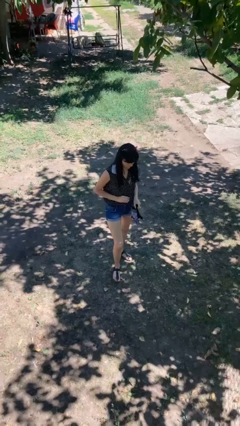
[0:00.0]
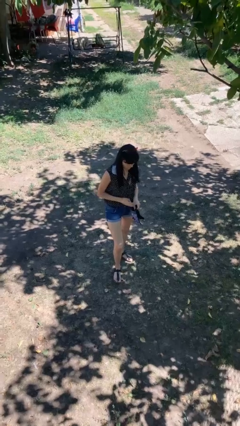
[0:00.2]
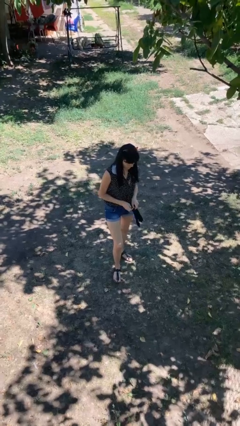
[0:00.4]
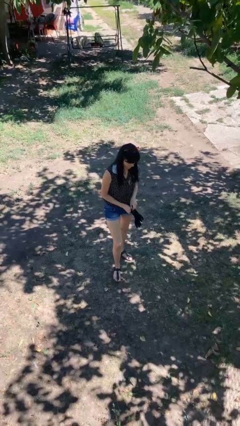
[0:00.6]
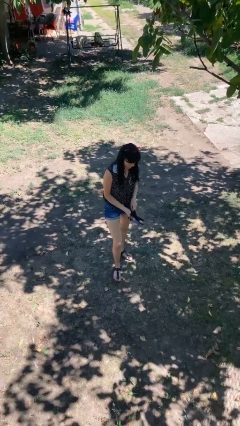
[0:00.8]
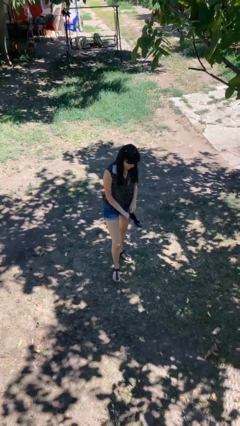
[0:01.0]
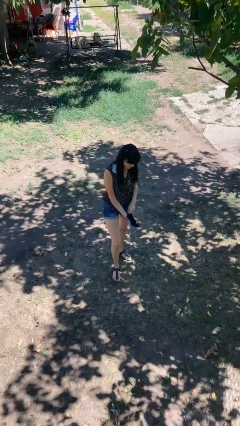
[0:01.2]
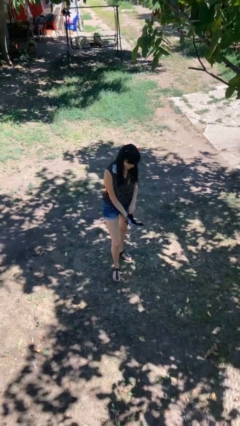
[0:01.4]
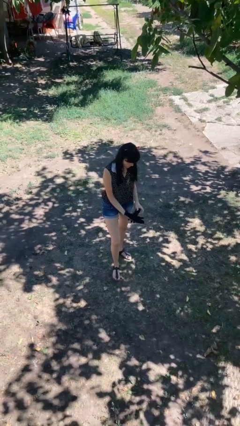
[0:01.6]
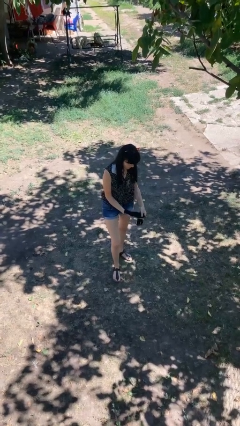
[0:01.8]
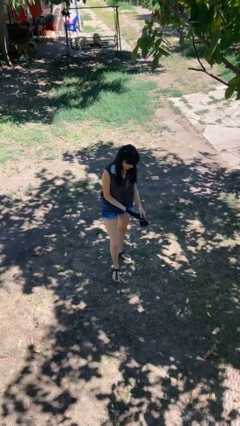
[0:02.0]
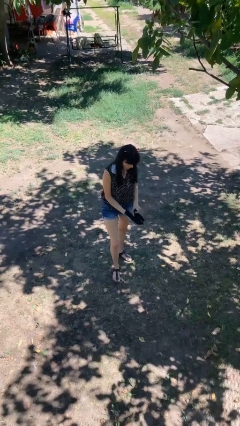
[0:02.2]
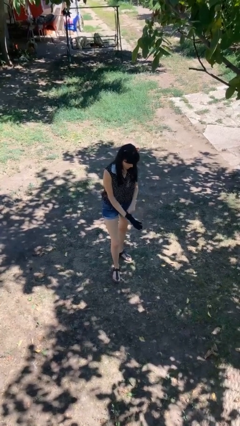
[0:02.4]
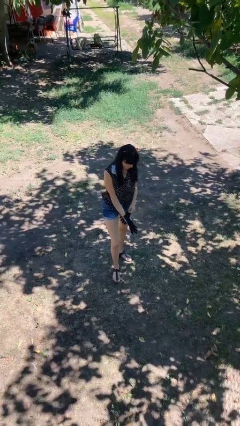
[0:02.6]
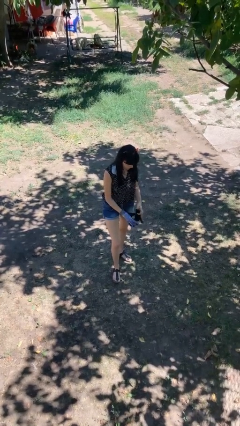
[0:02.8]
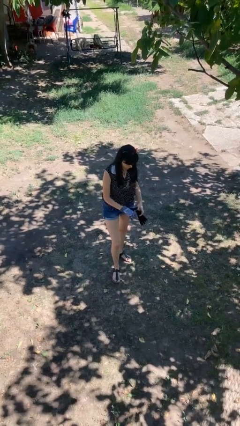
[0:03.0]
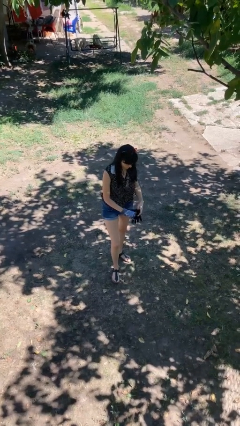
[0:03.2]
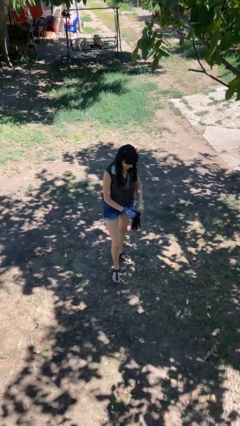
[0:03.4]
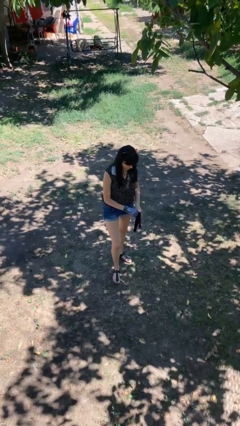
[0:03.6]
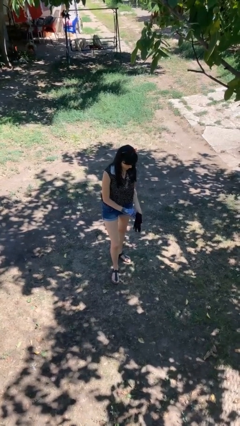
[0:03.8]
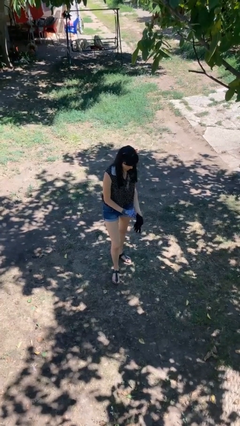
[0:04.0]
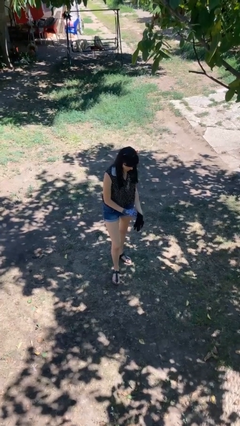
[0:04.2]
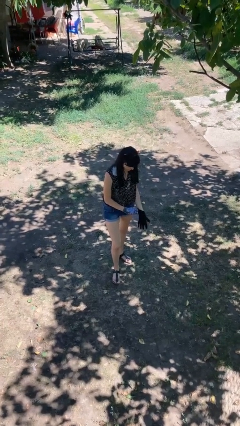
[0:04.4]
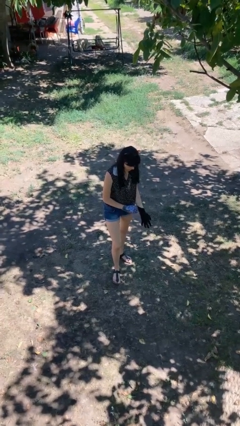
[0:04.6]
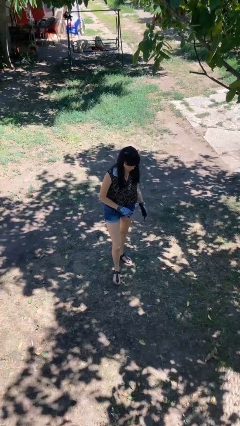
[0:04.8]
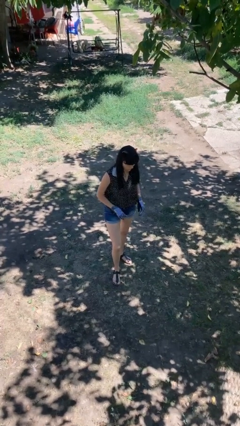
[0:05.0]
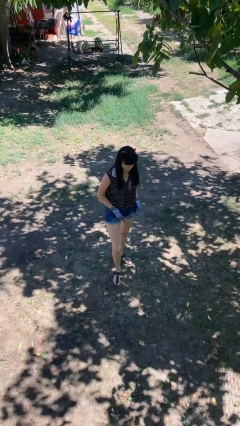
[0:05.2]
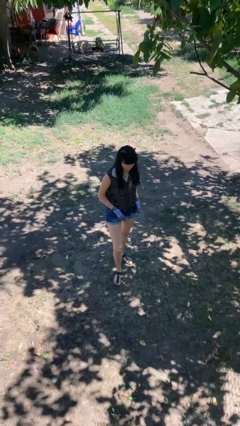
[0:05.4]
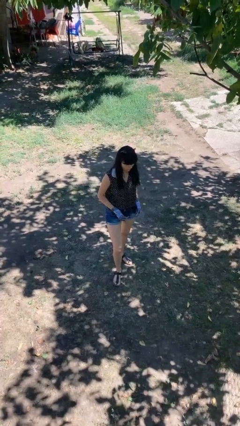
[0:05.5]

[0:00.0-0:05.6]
person puts on gloves

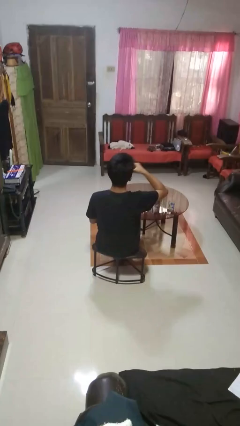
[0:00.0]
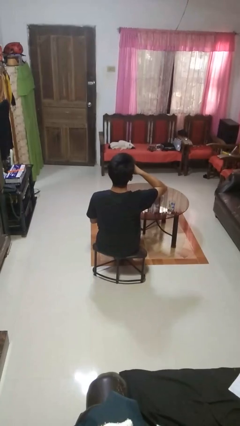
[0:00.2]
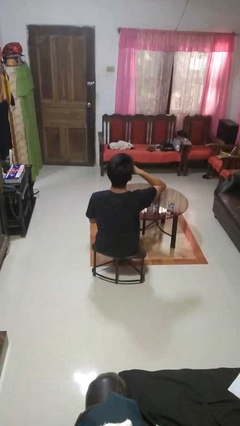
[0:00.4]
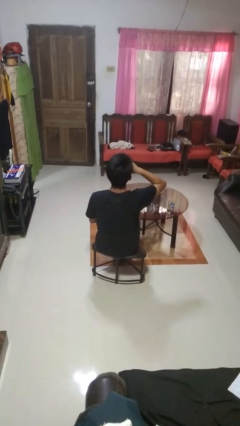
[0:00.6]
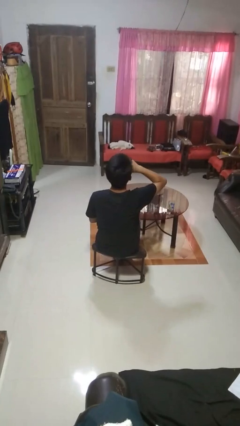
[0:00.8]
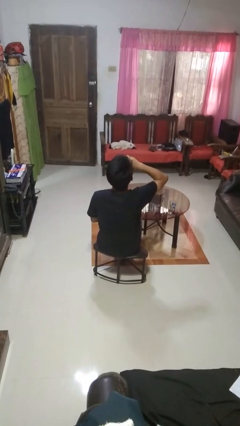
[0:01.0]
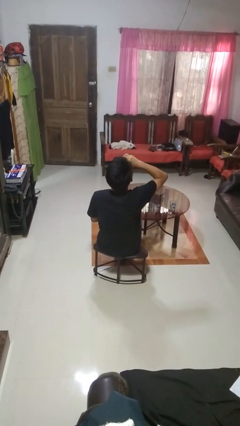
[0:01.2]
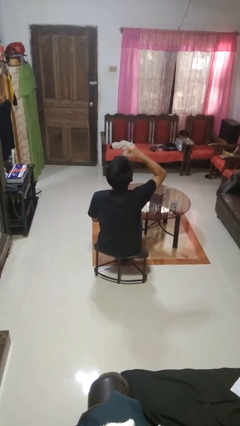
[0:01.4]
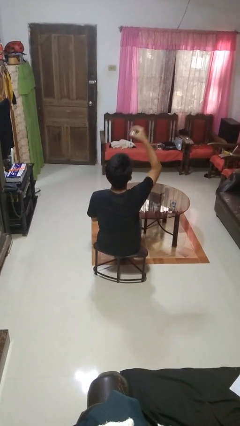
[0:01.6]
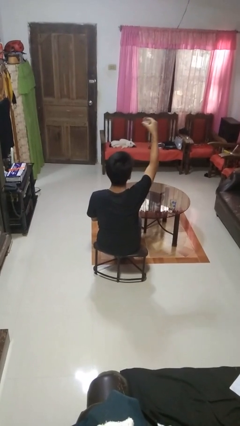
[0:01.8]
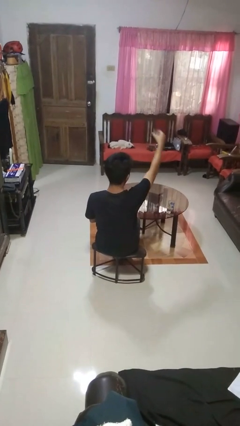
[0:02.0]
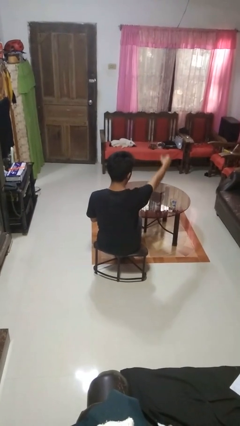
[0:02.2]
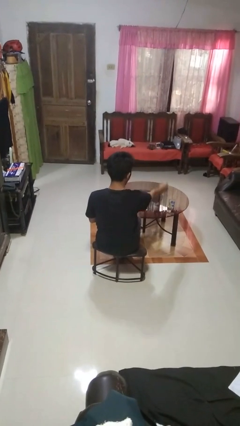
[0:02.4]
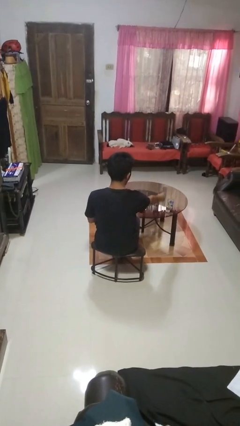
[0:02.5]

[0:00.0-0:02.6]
person drinks from shotglass

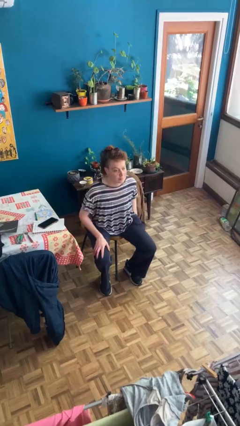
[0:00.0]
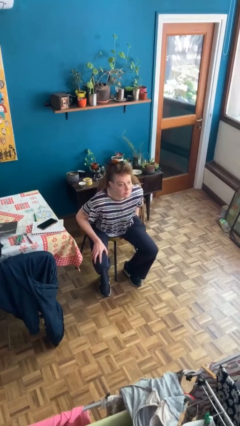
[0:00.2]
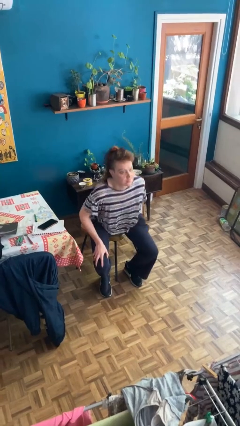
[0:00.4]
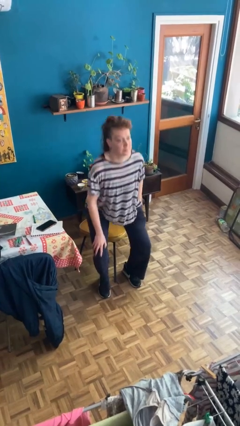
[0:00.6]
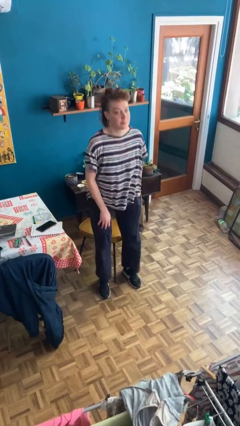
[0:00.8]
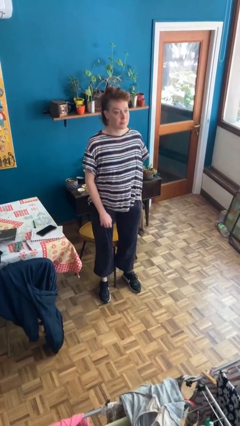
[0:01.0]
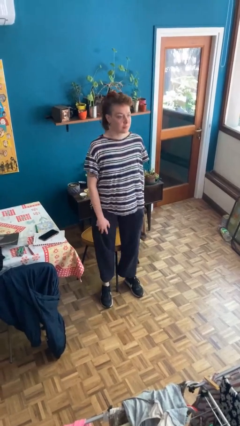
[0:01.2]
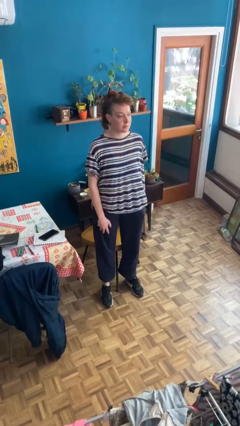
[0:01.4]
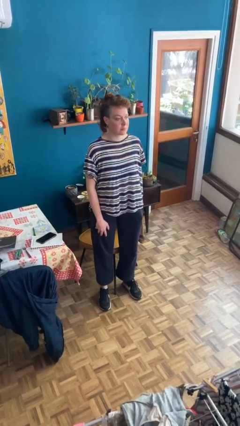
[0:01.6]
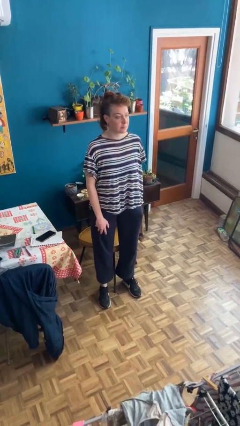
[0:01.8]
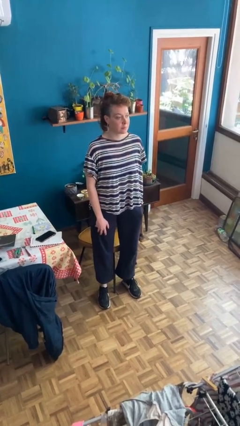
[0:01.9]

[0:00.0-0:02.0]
person stands up

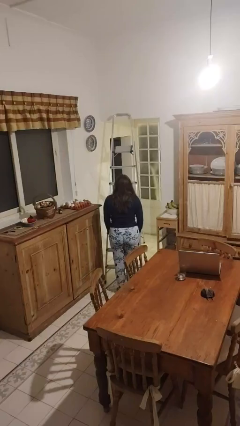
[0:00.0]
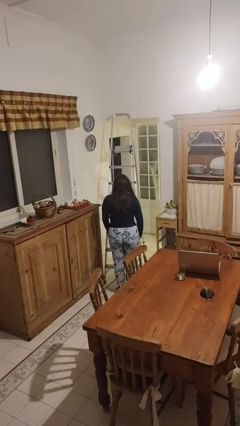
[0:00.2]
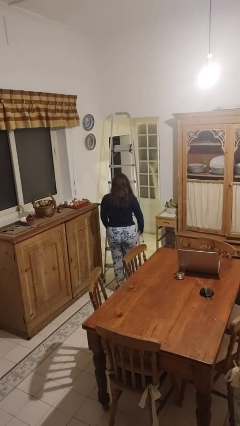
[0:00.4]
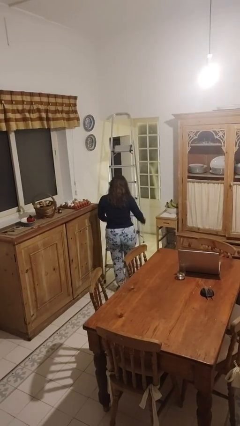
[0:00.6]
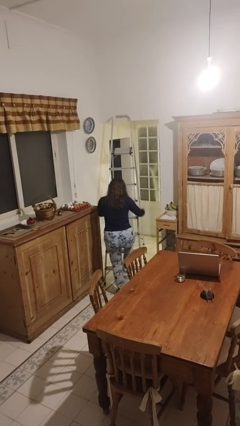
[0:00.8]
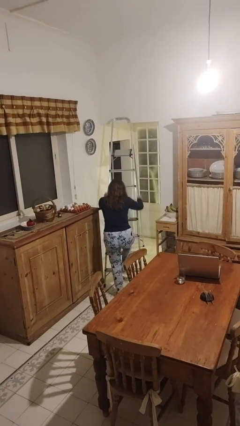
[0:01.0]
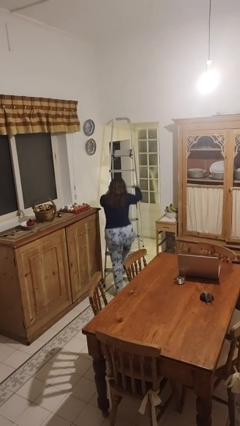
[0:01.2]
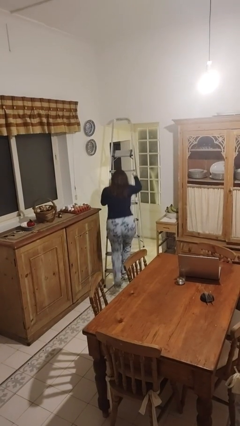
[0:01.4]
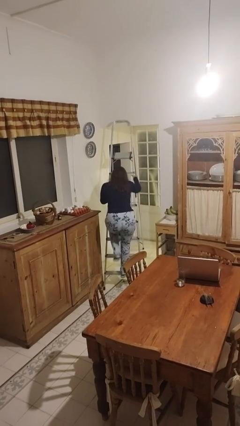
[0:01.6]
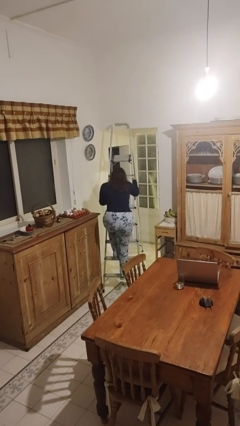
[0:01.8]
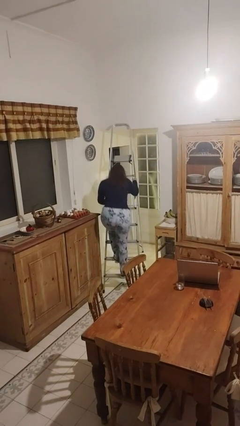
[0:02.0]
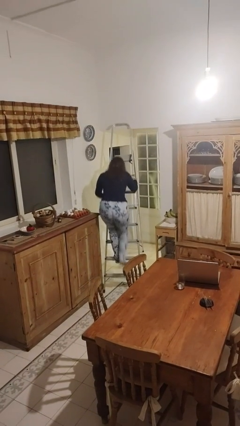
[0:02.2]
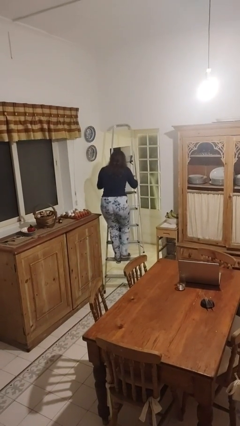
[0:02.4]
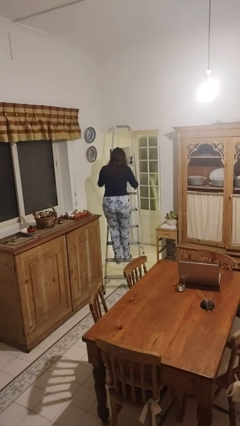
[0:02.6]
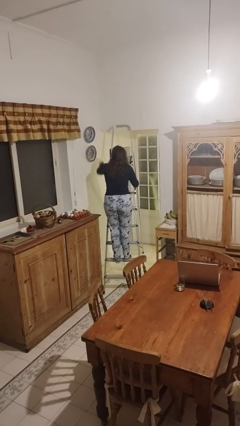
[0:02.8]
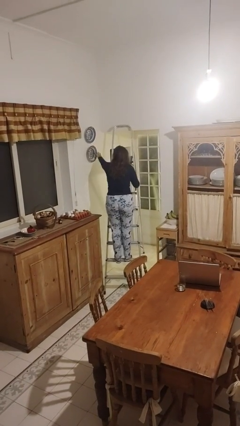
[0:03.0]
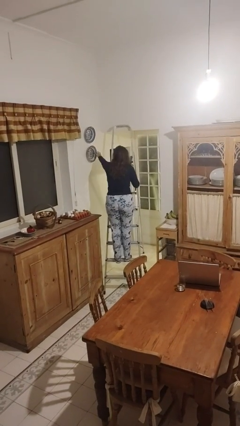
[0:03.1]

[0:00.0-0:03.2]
person climbs up ladder

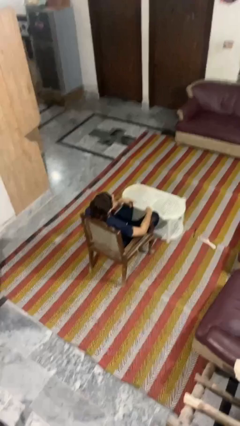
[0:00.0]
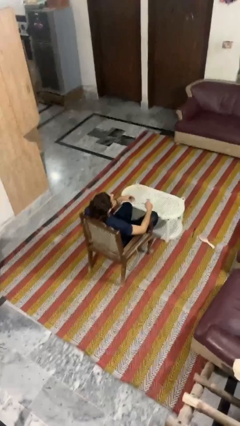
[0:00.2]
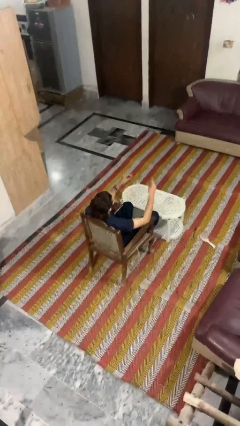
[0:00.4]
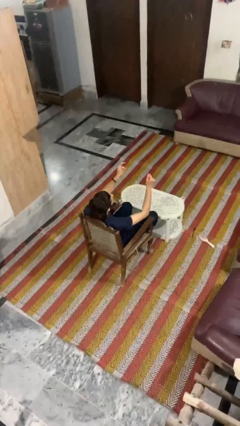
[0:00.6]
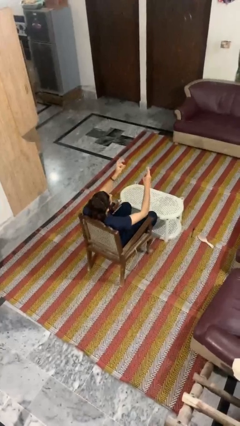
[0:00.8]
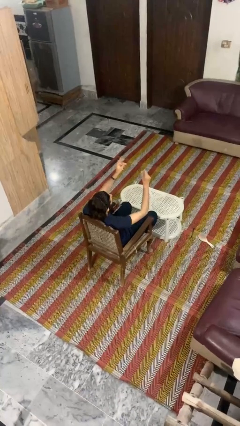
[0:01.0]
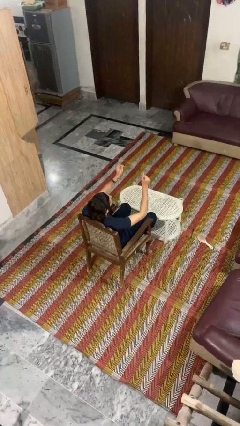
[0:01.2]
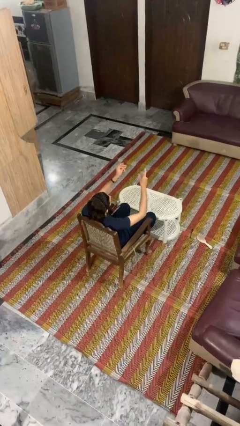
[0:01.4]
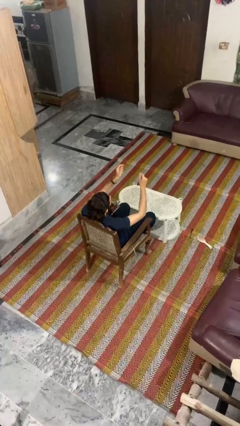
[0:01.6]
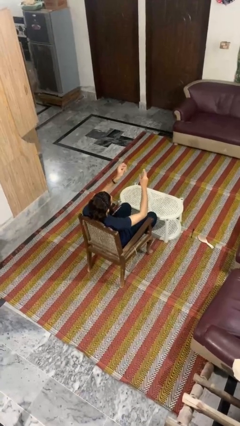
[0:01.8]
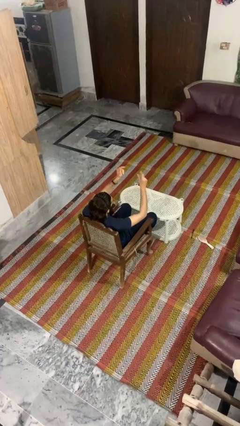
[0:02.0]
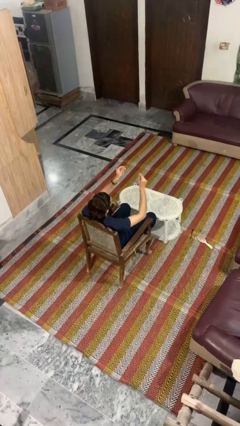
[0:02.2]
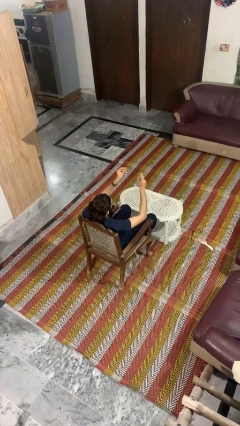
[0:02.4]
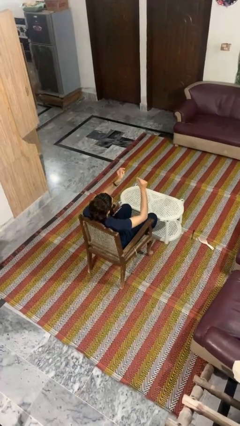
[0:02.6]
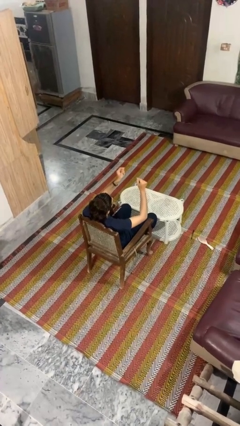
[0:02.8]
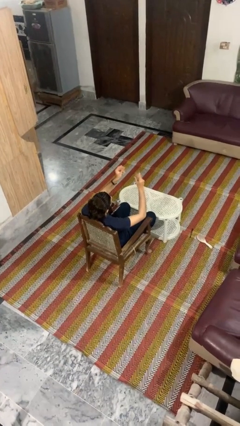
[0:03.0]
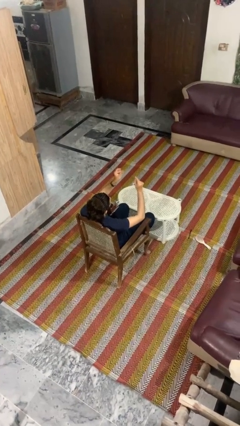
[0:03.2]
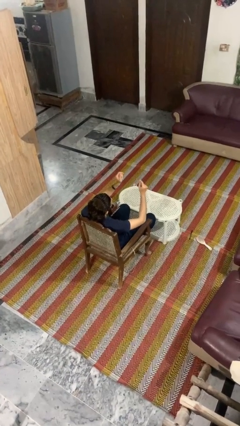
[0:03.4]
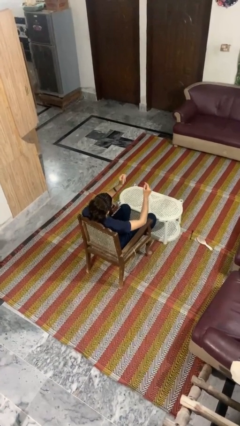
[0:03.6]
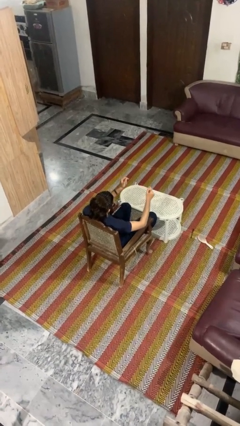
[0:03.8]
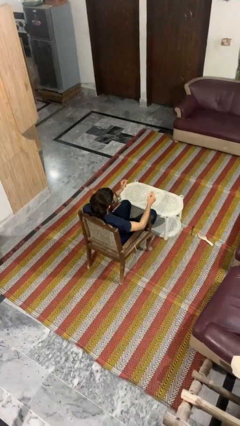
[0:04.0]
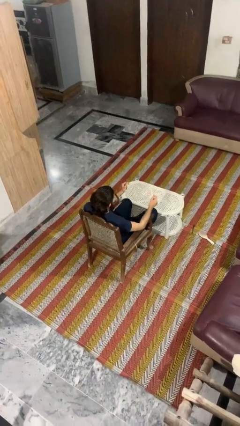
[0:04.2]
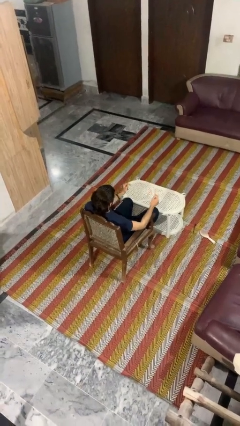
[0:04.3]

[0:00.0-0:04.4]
person snaps fingers
